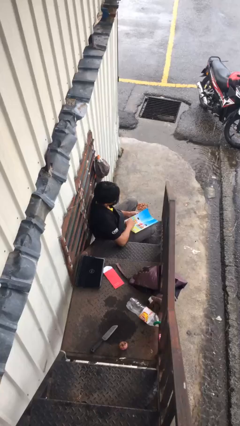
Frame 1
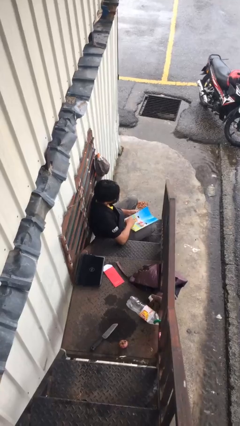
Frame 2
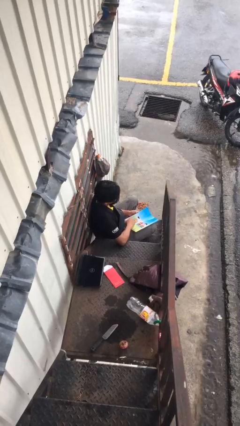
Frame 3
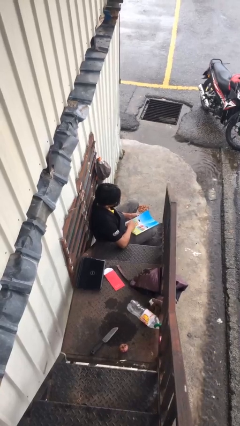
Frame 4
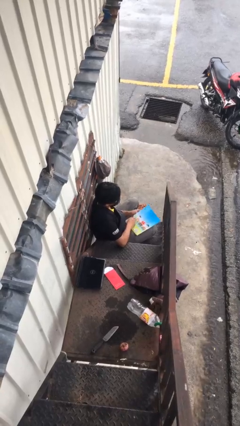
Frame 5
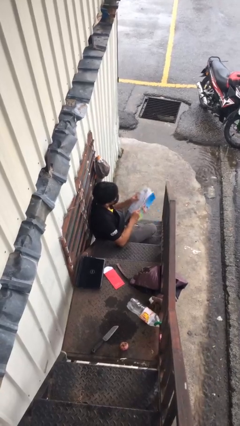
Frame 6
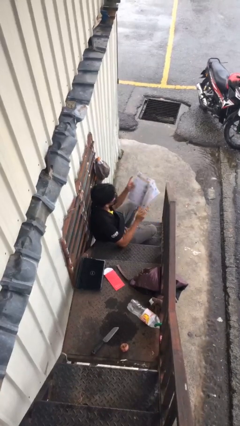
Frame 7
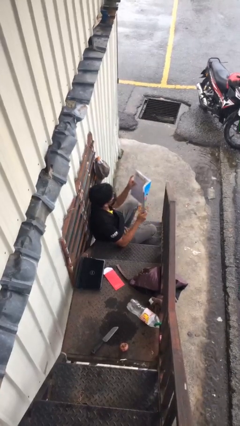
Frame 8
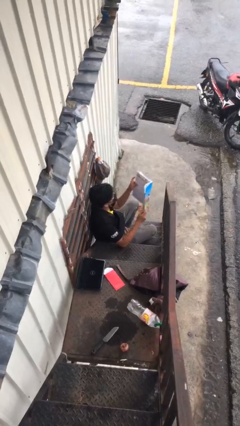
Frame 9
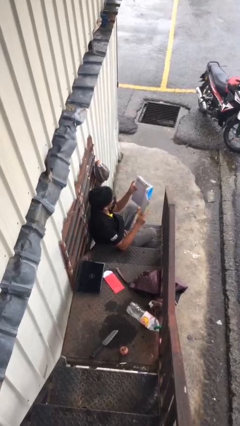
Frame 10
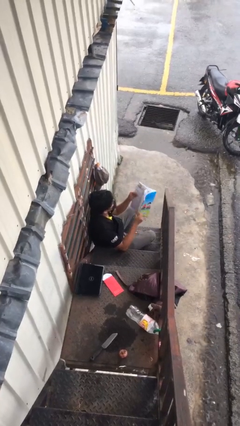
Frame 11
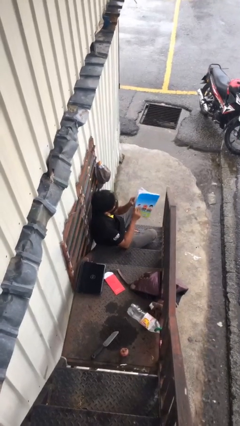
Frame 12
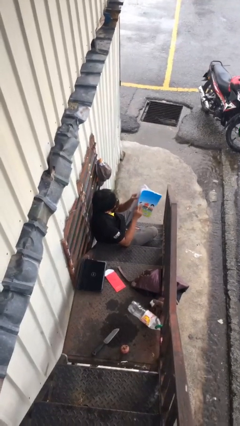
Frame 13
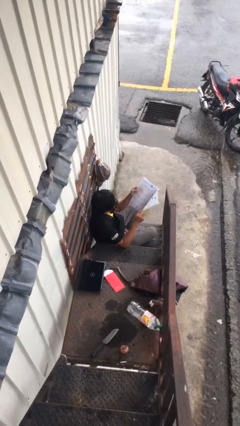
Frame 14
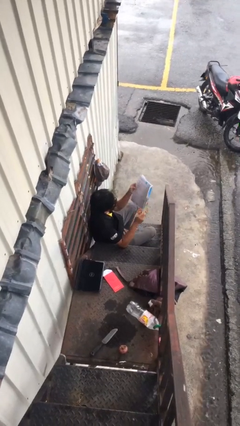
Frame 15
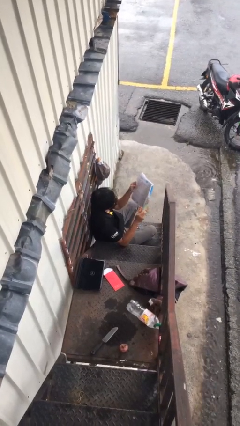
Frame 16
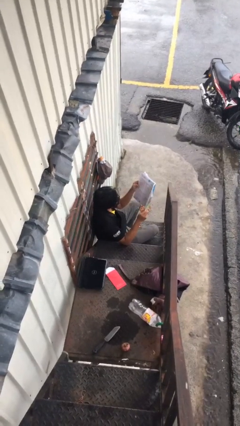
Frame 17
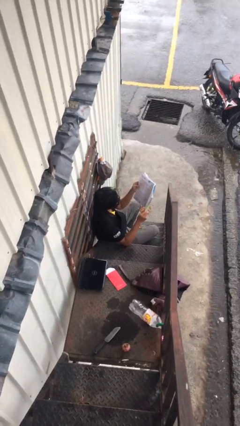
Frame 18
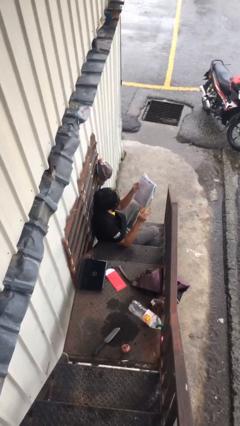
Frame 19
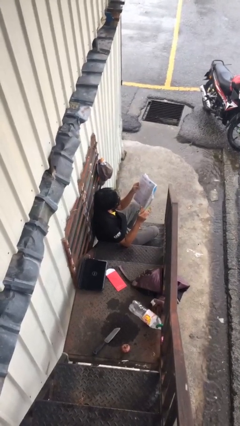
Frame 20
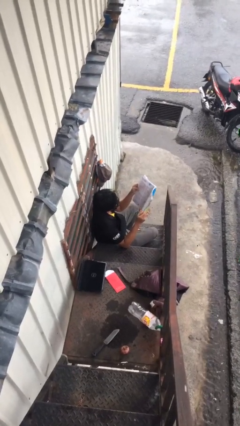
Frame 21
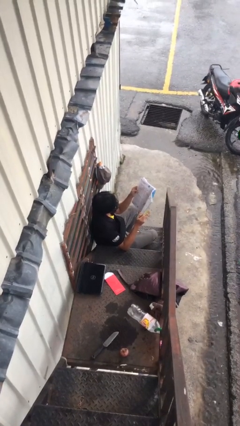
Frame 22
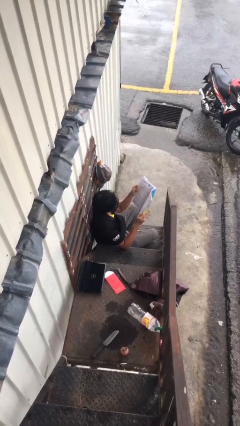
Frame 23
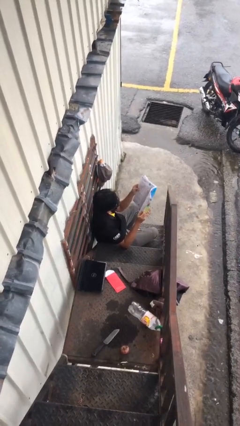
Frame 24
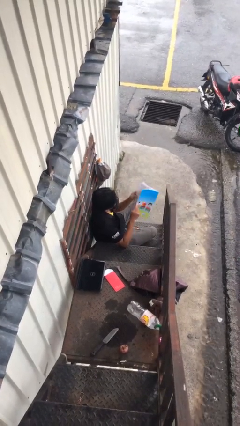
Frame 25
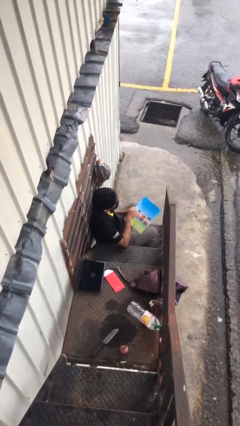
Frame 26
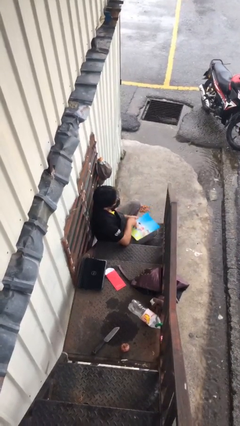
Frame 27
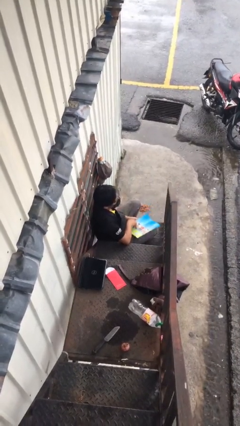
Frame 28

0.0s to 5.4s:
person reads document

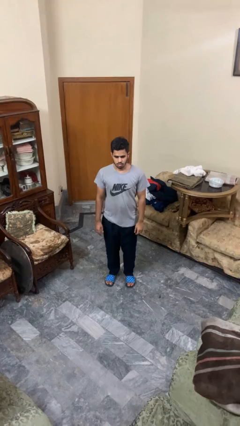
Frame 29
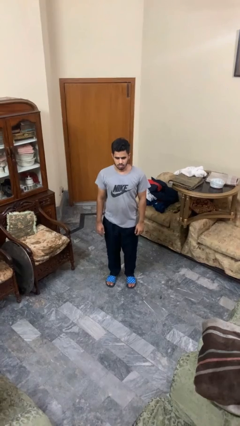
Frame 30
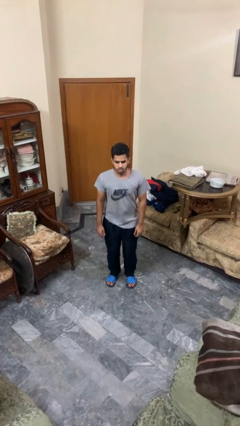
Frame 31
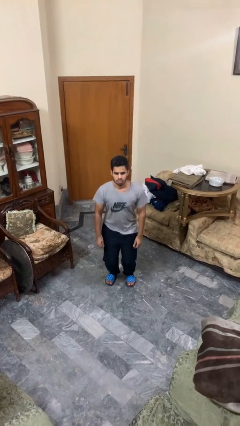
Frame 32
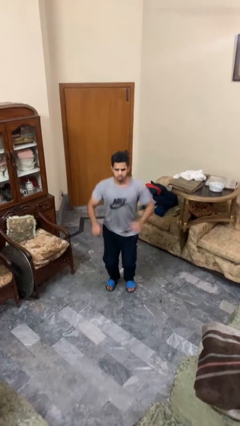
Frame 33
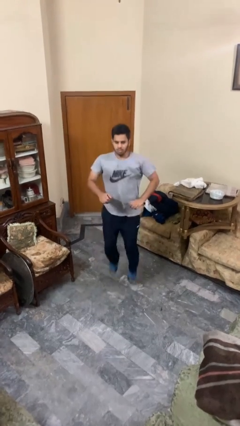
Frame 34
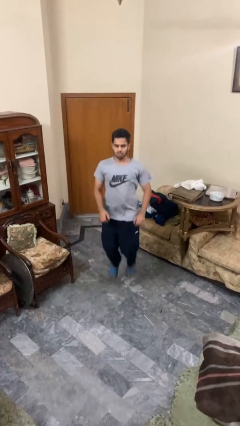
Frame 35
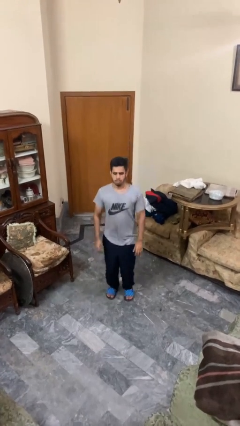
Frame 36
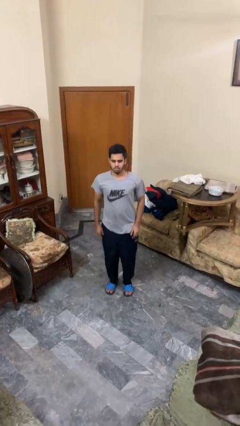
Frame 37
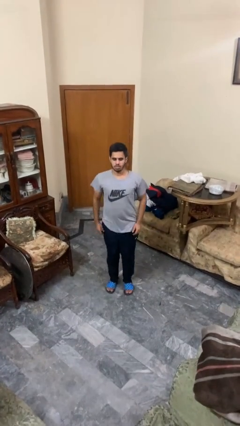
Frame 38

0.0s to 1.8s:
person jumps

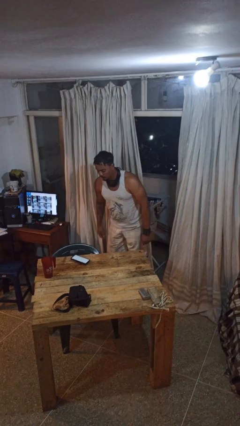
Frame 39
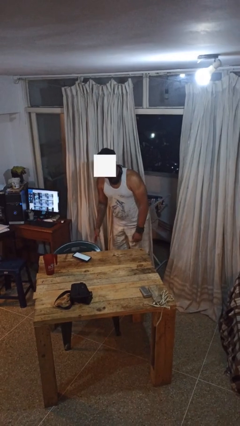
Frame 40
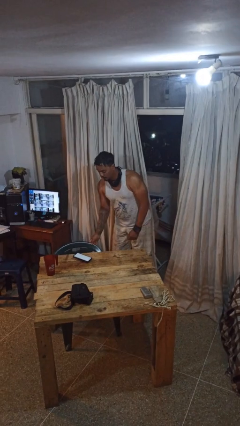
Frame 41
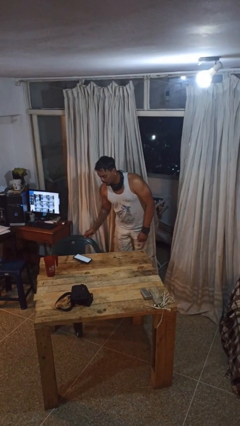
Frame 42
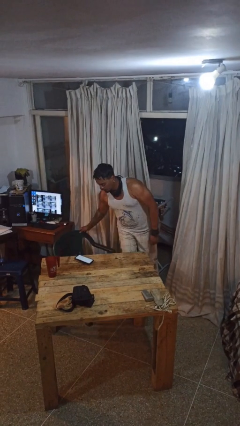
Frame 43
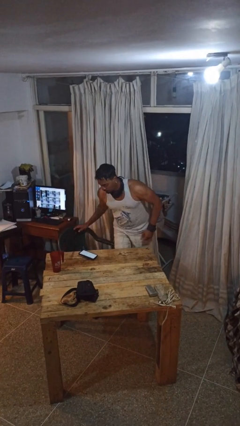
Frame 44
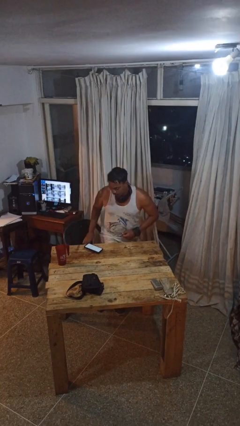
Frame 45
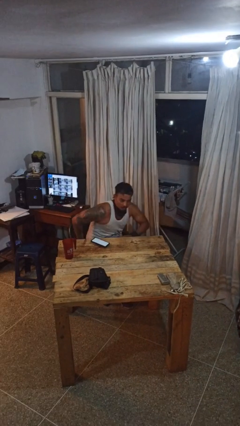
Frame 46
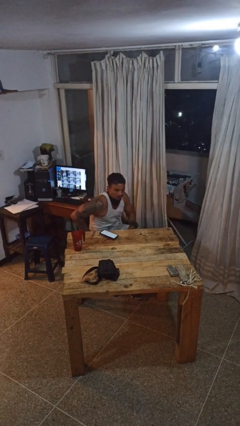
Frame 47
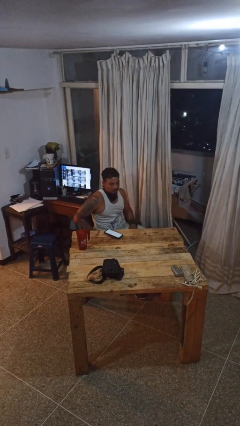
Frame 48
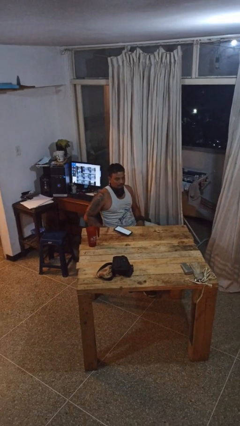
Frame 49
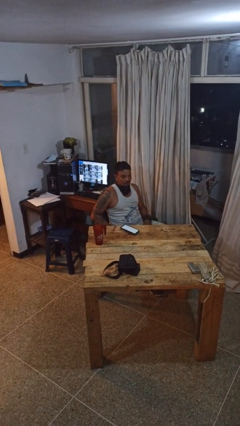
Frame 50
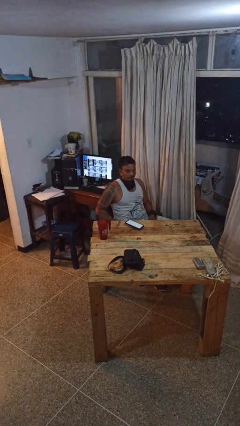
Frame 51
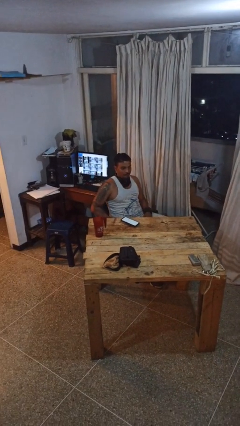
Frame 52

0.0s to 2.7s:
person sits down

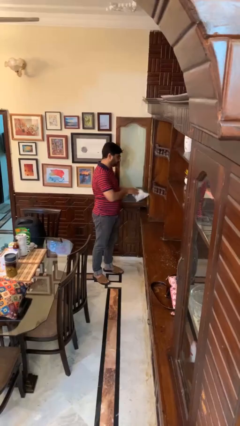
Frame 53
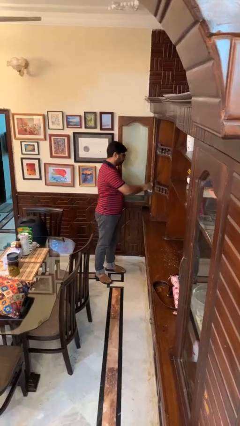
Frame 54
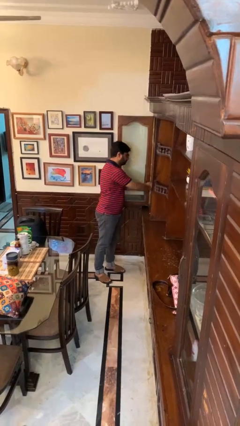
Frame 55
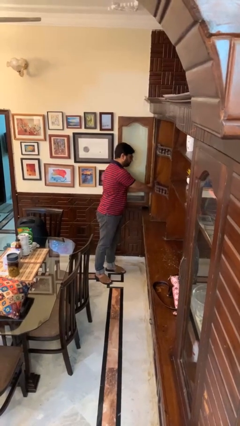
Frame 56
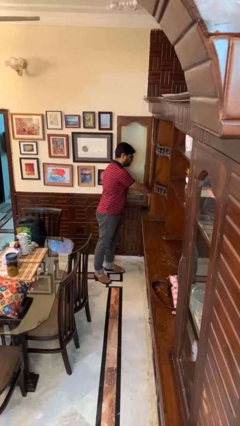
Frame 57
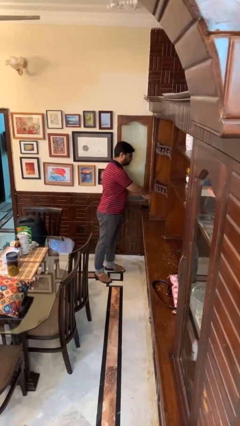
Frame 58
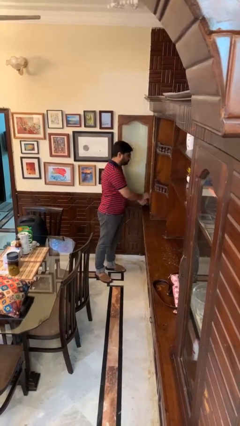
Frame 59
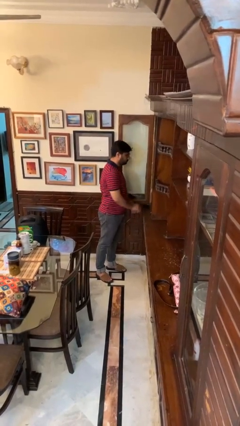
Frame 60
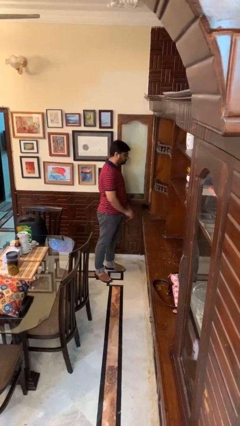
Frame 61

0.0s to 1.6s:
person puts clothes into dresser

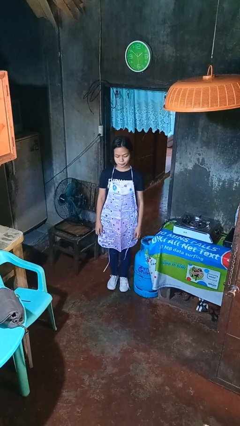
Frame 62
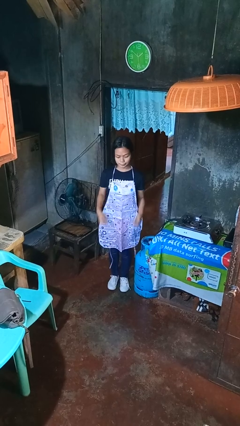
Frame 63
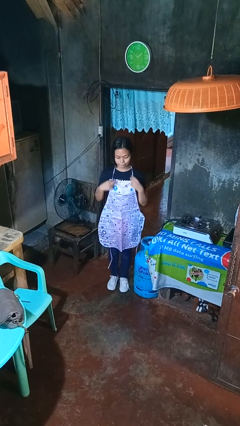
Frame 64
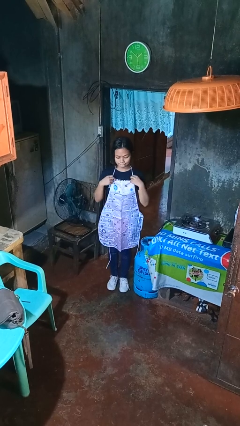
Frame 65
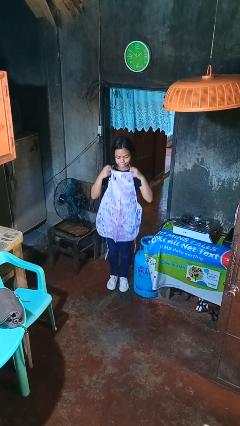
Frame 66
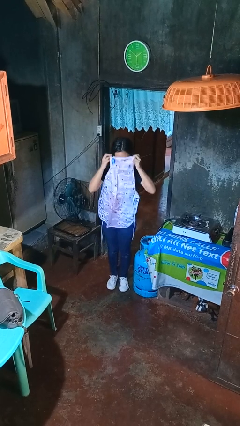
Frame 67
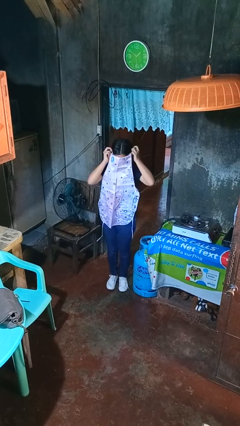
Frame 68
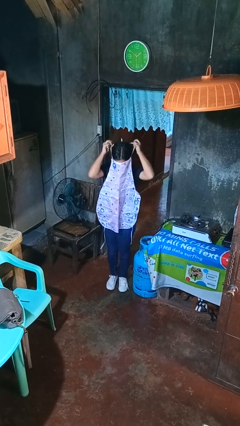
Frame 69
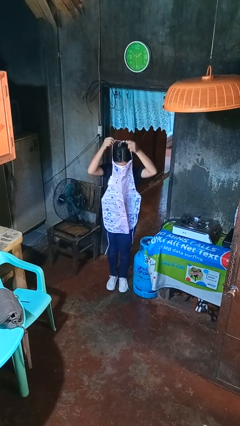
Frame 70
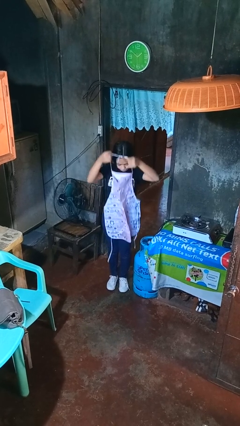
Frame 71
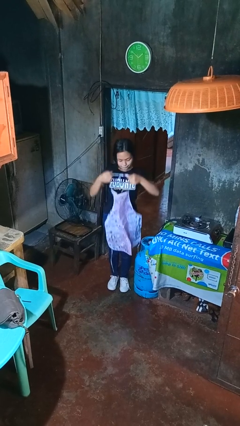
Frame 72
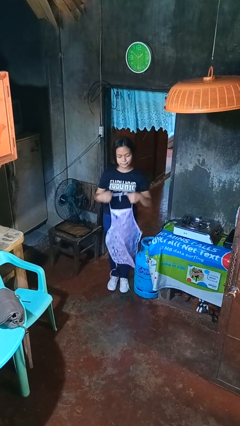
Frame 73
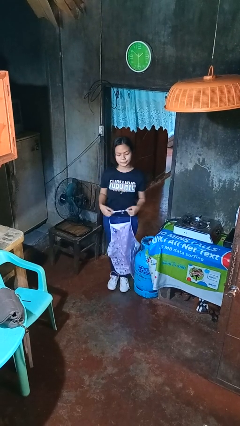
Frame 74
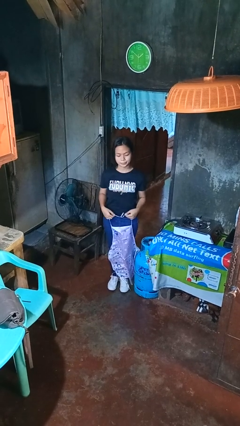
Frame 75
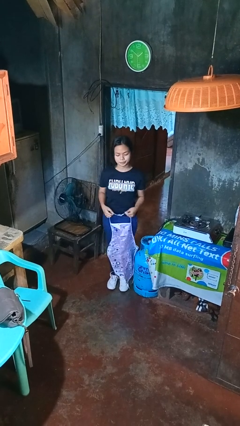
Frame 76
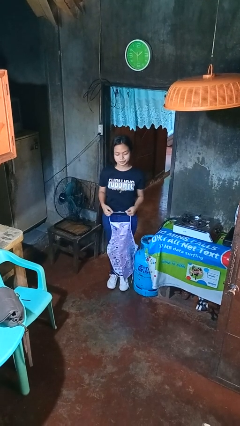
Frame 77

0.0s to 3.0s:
person takes off apron

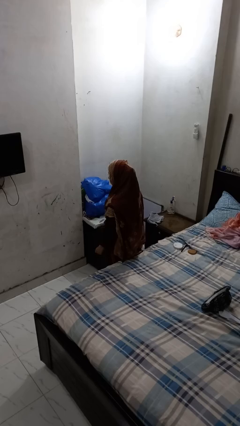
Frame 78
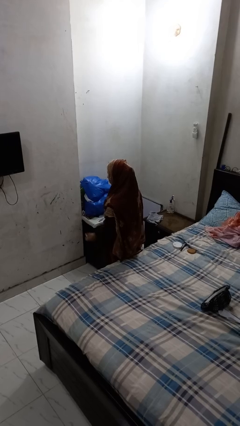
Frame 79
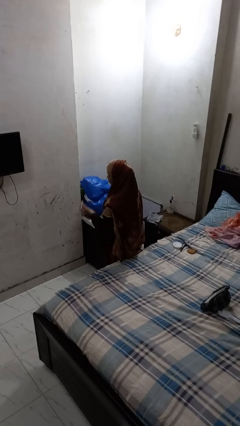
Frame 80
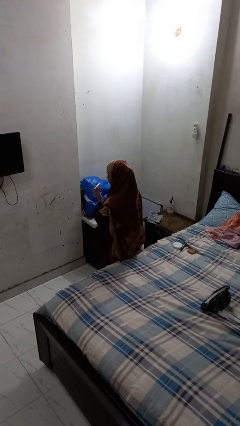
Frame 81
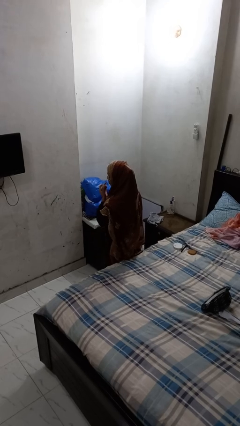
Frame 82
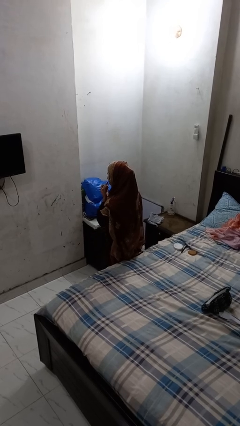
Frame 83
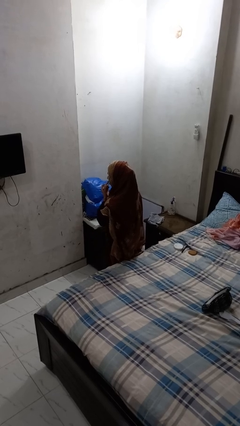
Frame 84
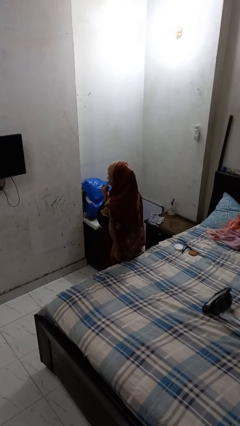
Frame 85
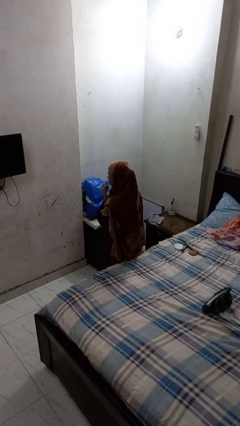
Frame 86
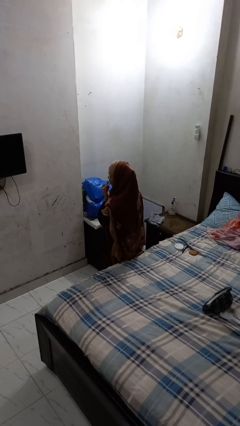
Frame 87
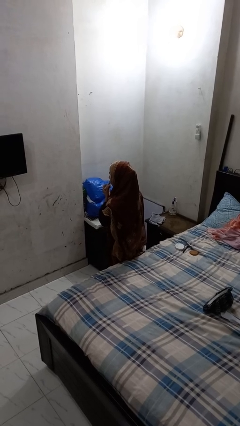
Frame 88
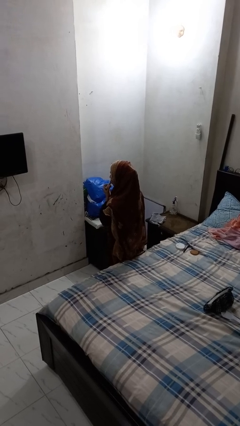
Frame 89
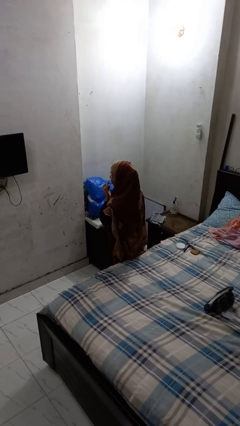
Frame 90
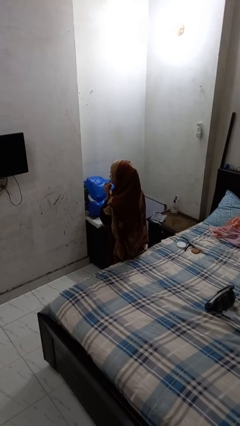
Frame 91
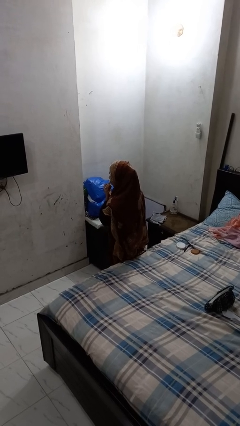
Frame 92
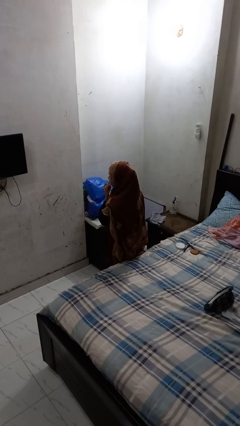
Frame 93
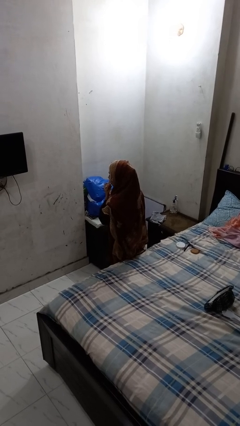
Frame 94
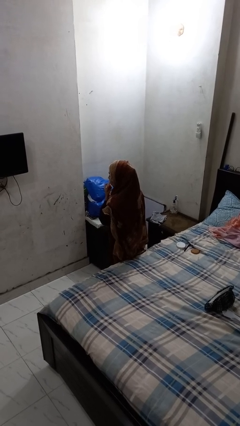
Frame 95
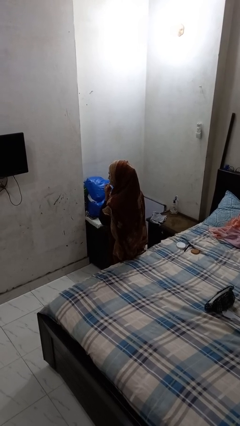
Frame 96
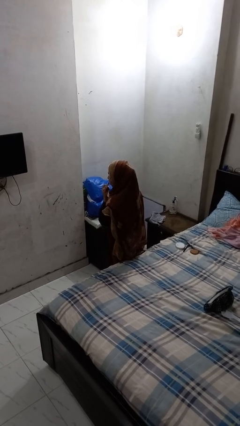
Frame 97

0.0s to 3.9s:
person applies lip makeup
